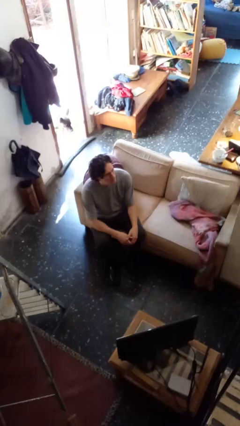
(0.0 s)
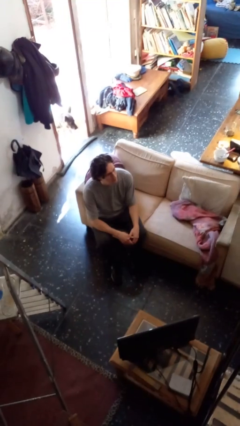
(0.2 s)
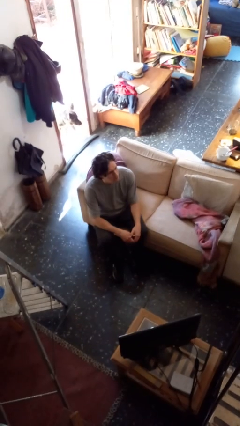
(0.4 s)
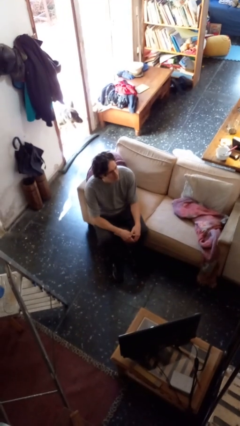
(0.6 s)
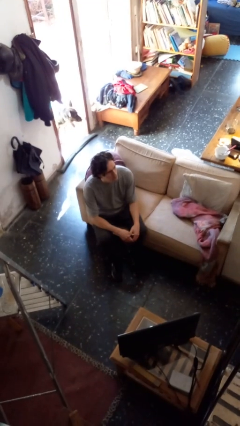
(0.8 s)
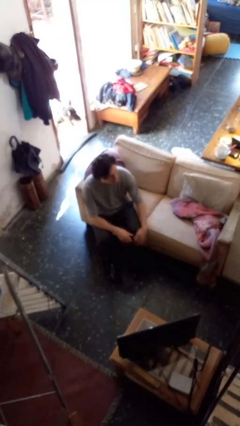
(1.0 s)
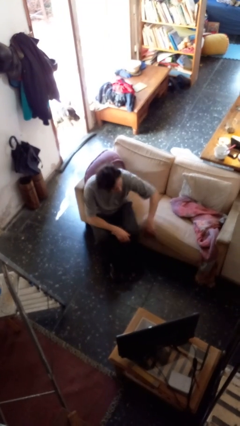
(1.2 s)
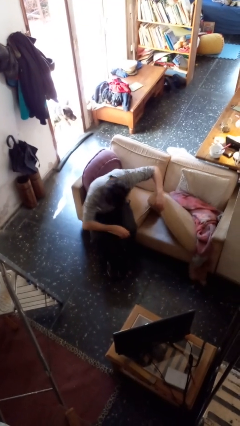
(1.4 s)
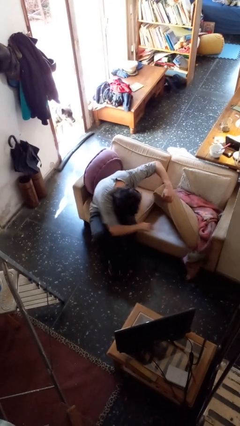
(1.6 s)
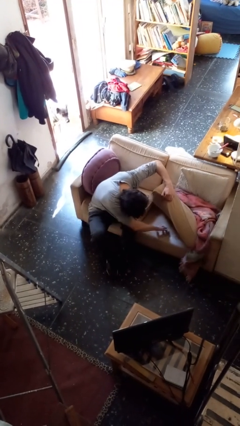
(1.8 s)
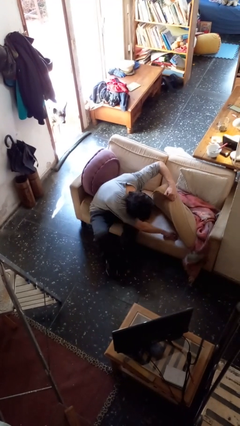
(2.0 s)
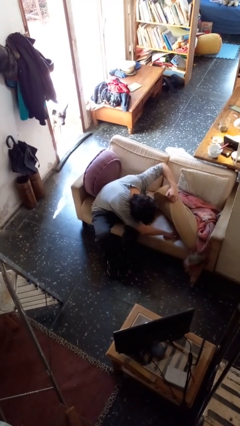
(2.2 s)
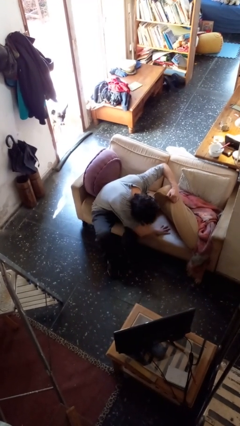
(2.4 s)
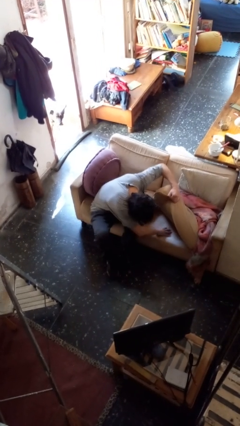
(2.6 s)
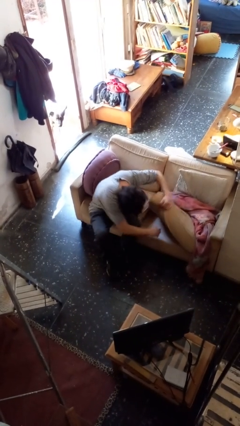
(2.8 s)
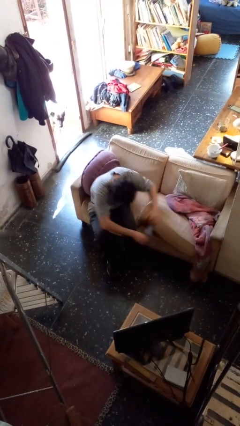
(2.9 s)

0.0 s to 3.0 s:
person searches in couch

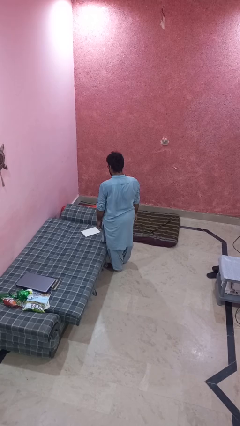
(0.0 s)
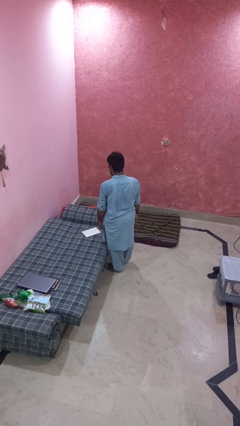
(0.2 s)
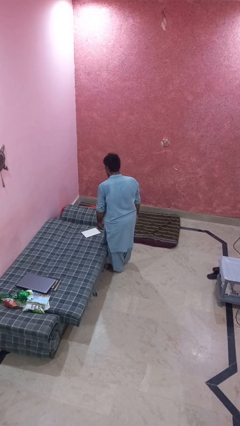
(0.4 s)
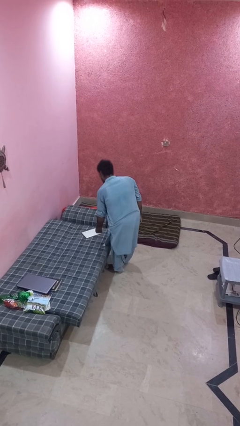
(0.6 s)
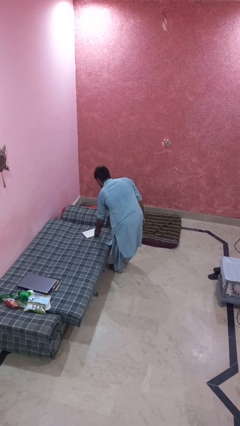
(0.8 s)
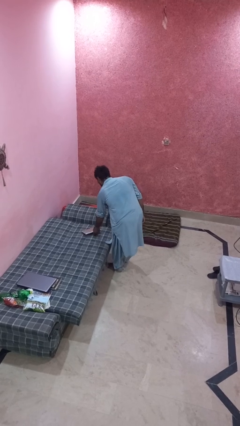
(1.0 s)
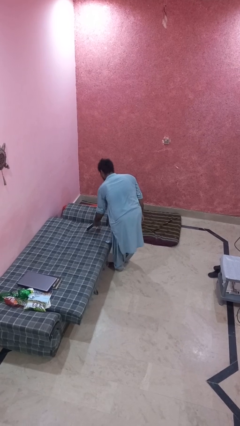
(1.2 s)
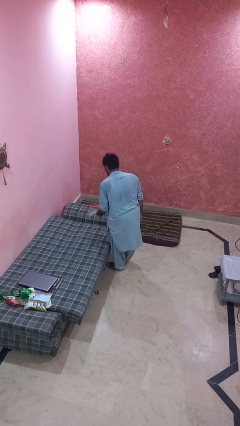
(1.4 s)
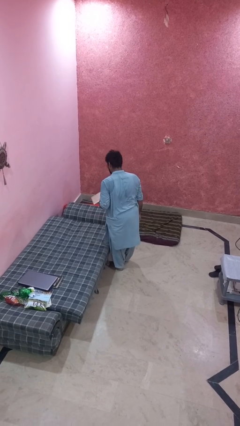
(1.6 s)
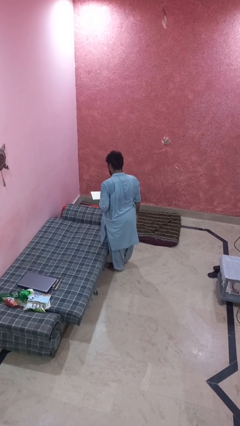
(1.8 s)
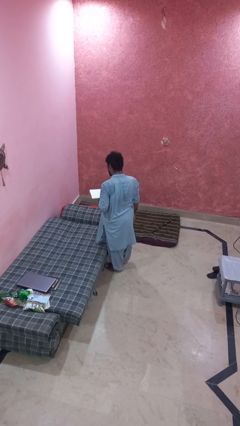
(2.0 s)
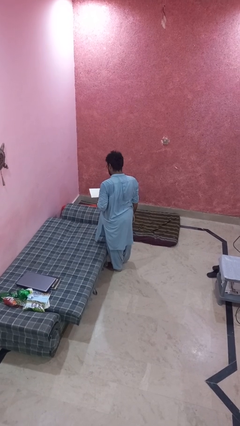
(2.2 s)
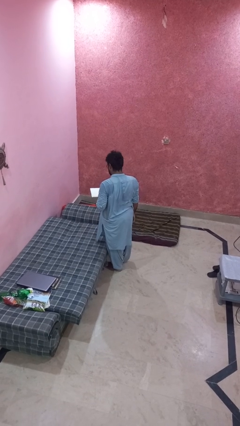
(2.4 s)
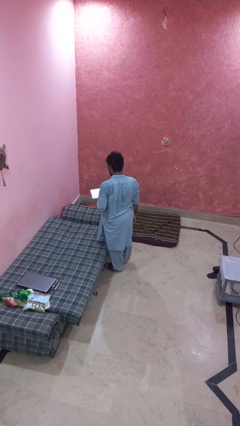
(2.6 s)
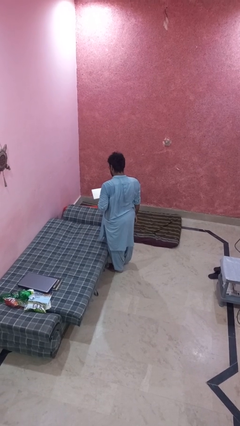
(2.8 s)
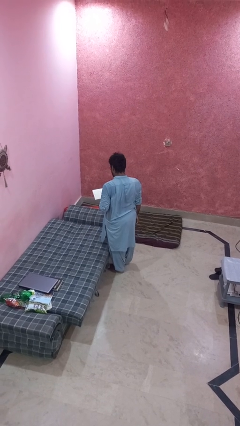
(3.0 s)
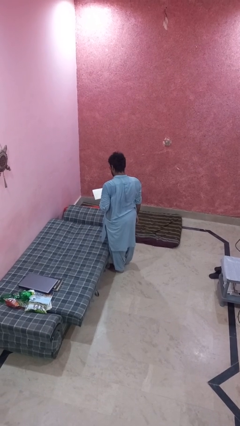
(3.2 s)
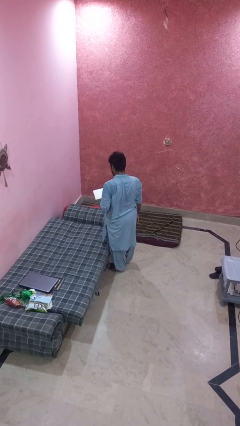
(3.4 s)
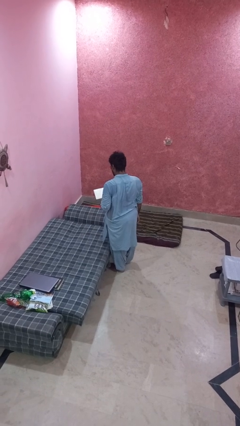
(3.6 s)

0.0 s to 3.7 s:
person picks up object from bed

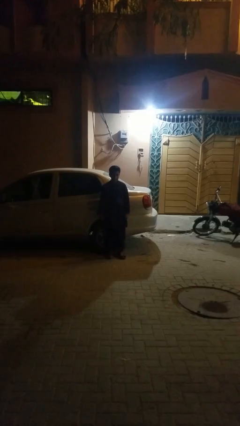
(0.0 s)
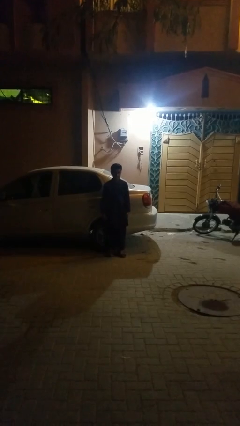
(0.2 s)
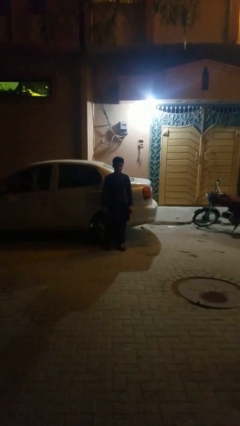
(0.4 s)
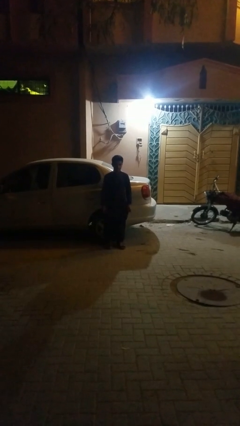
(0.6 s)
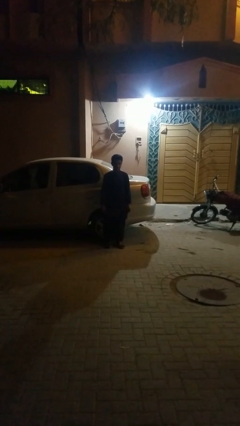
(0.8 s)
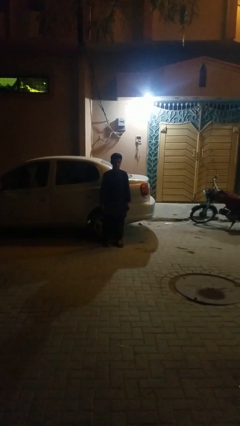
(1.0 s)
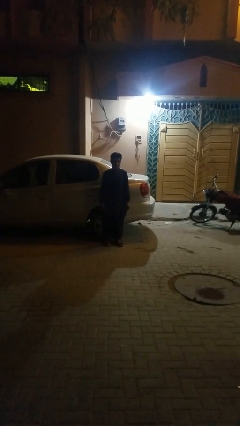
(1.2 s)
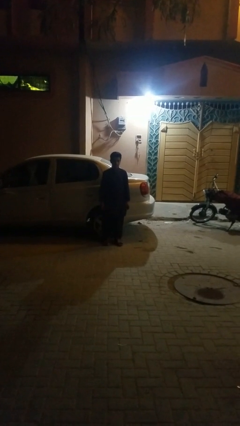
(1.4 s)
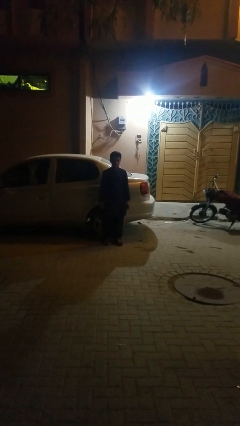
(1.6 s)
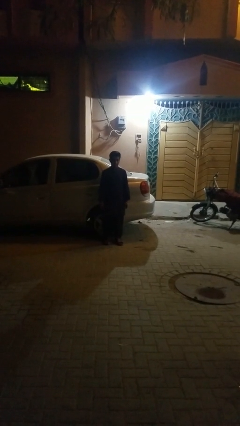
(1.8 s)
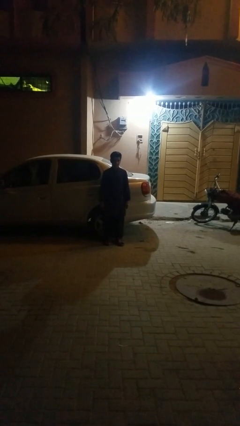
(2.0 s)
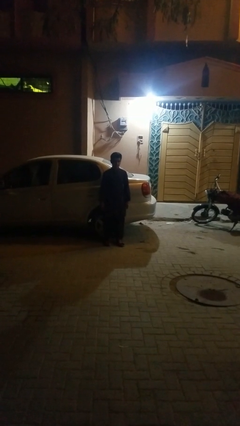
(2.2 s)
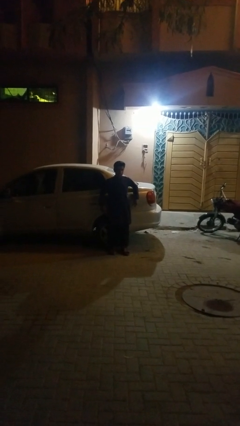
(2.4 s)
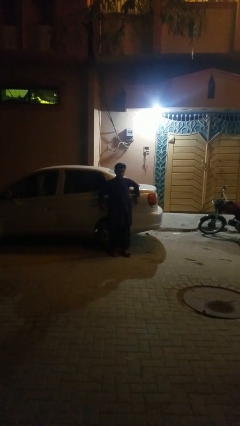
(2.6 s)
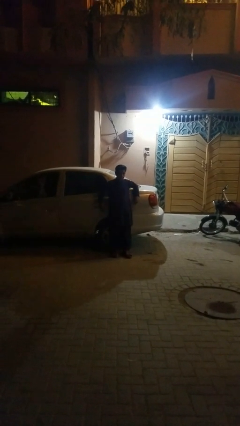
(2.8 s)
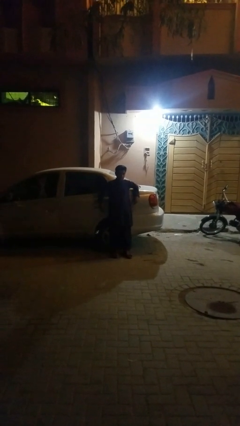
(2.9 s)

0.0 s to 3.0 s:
person leans against car

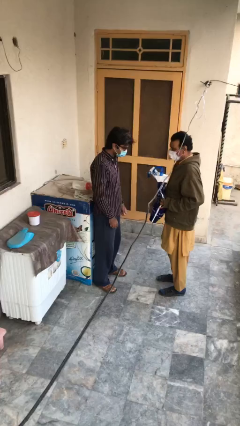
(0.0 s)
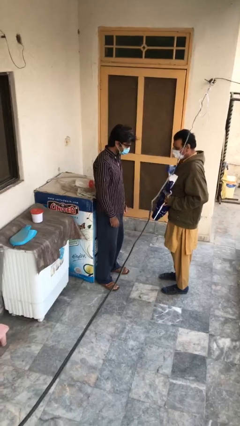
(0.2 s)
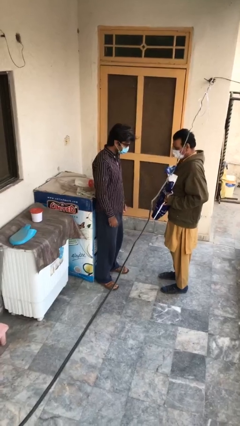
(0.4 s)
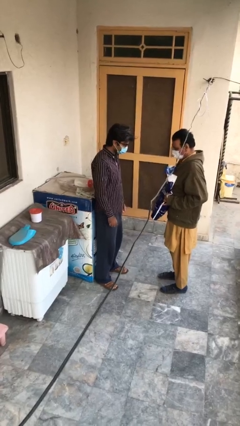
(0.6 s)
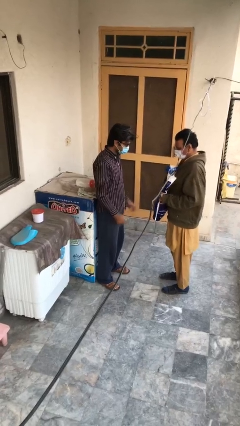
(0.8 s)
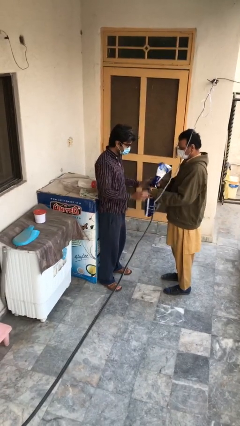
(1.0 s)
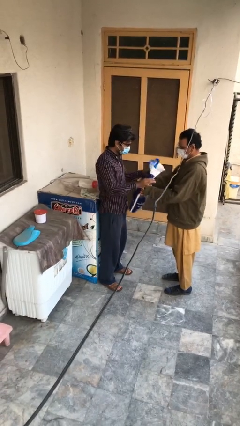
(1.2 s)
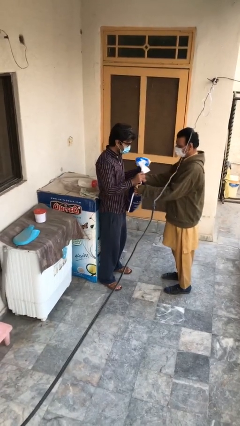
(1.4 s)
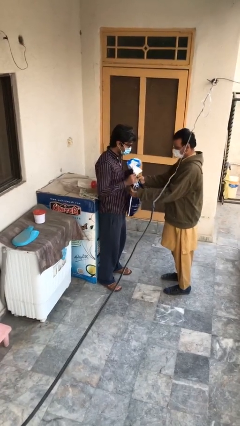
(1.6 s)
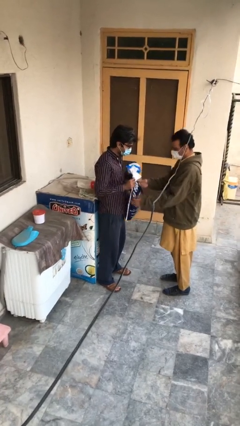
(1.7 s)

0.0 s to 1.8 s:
person transfers object to person

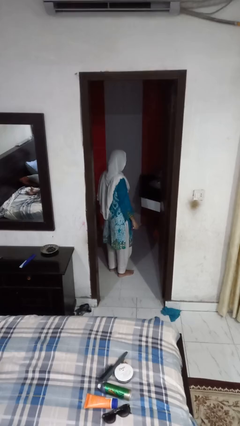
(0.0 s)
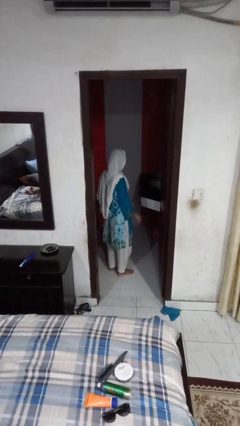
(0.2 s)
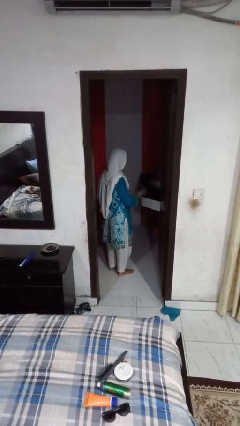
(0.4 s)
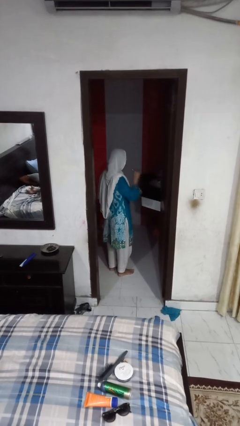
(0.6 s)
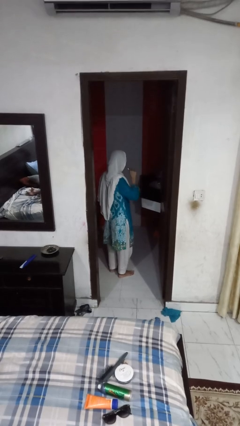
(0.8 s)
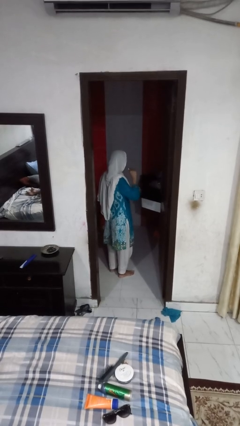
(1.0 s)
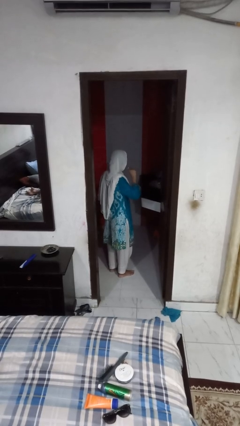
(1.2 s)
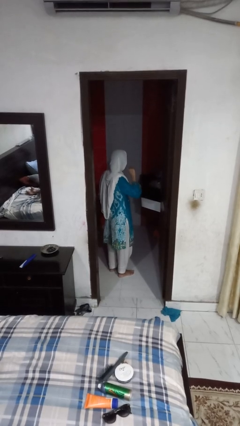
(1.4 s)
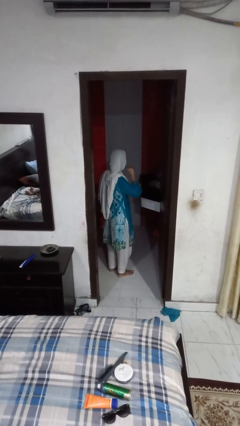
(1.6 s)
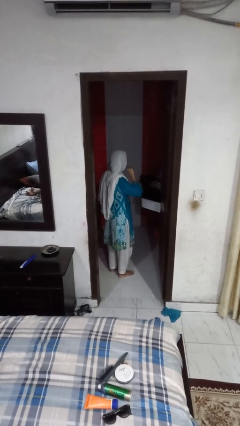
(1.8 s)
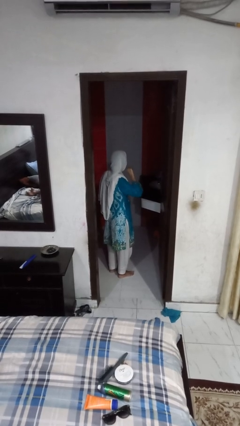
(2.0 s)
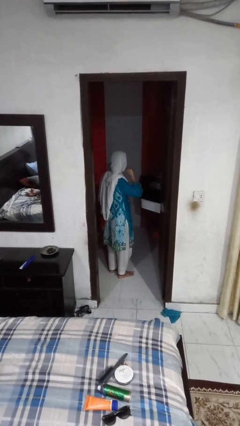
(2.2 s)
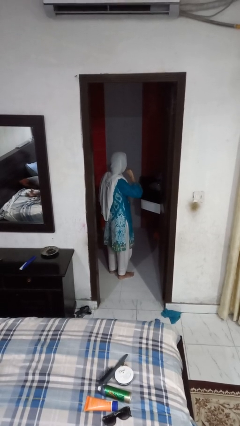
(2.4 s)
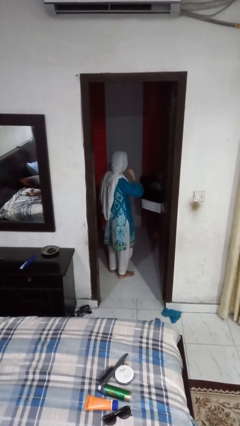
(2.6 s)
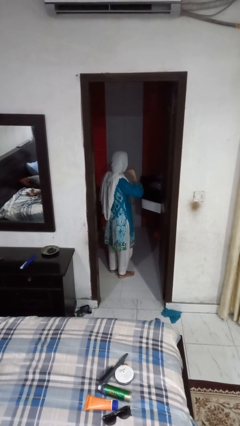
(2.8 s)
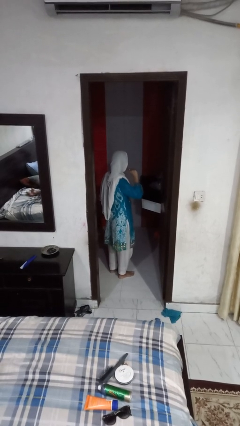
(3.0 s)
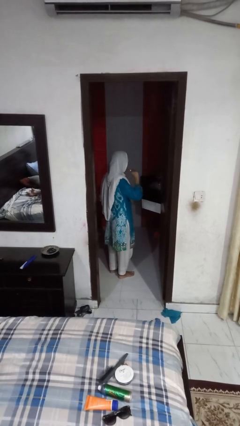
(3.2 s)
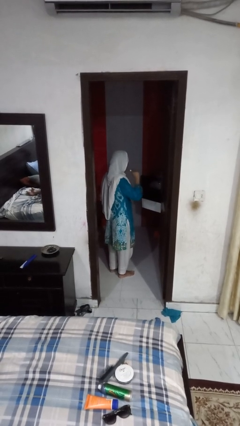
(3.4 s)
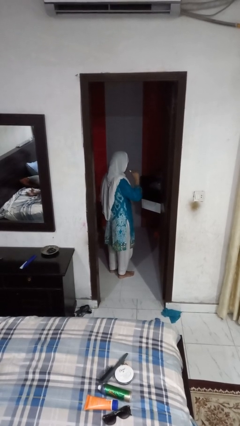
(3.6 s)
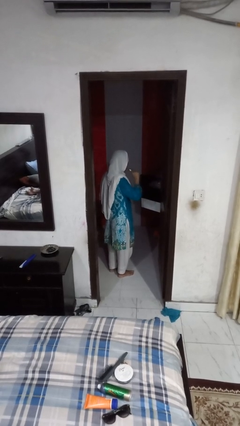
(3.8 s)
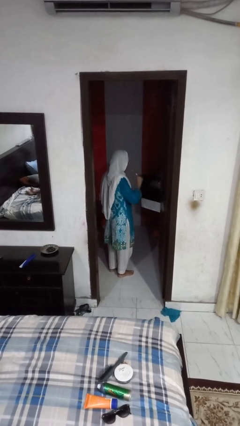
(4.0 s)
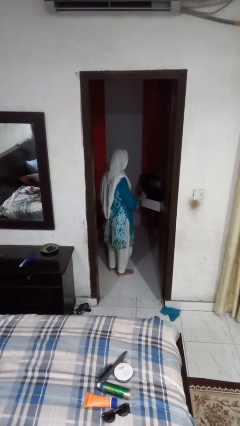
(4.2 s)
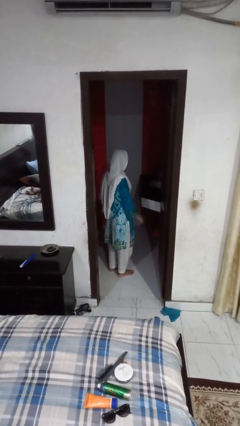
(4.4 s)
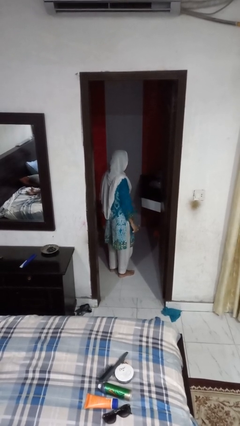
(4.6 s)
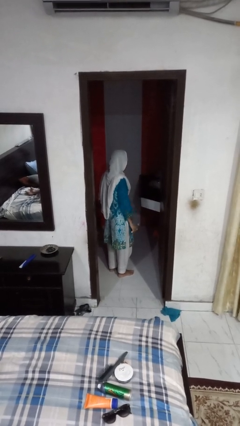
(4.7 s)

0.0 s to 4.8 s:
person brushes teeth

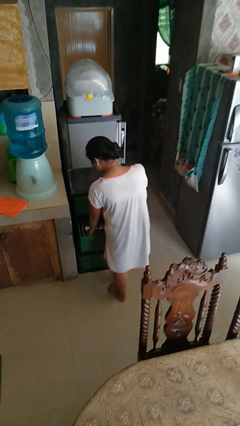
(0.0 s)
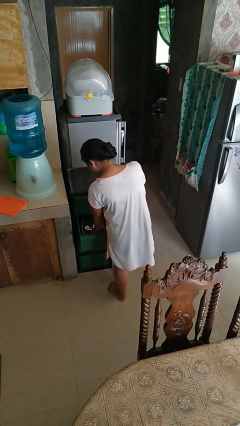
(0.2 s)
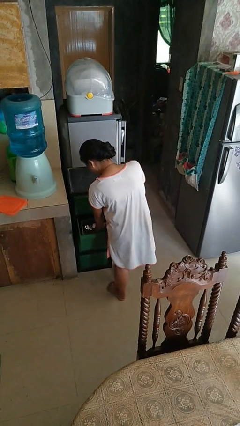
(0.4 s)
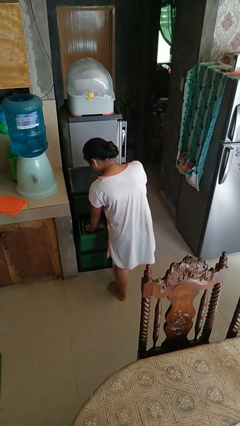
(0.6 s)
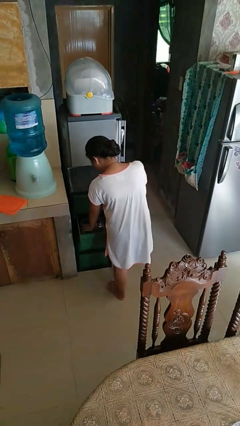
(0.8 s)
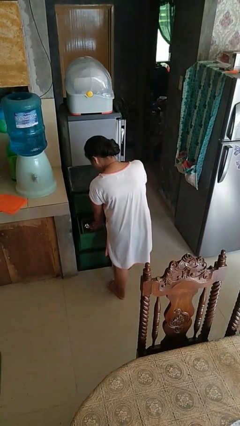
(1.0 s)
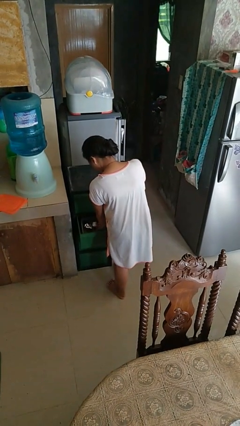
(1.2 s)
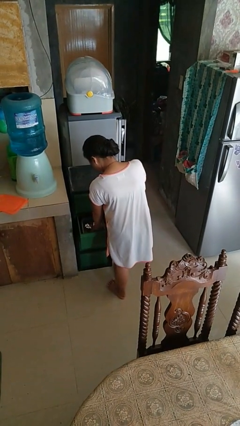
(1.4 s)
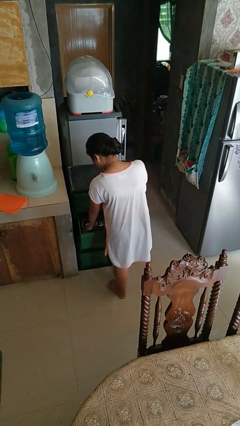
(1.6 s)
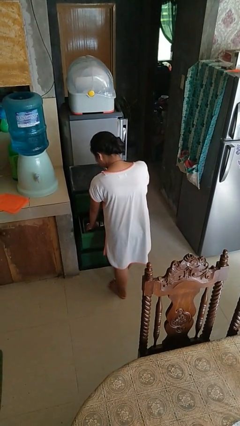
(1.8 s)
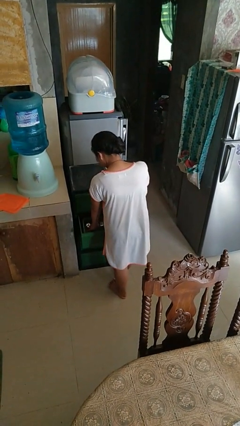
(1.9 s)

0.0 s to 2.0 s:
person searches in kitchen drawer
